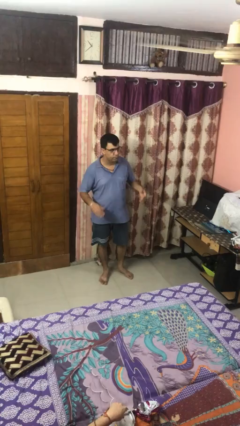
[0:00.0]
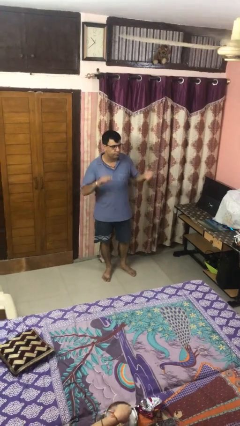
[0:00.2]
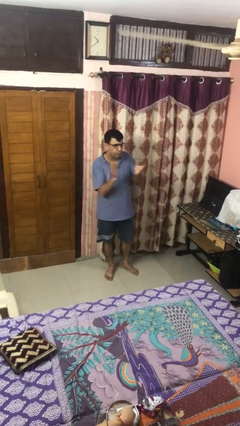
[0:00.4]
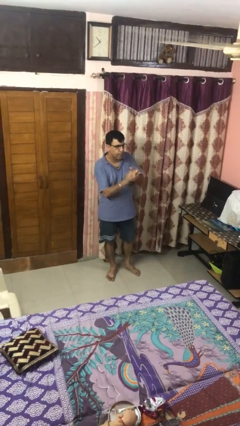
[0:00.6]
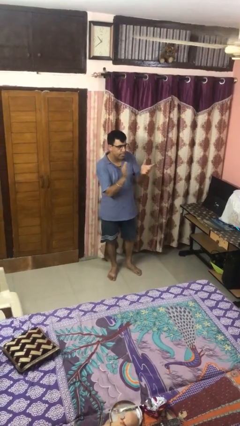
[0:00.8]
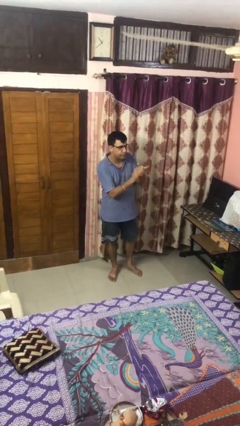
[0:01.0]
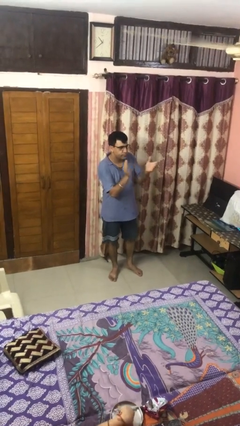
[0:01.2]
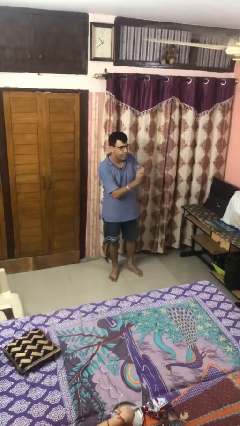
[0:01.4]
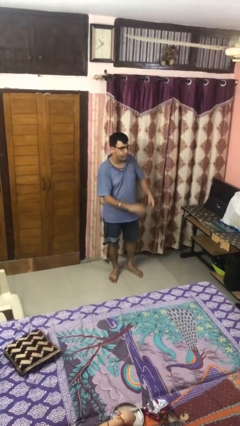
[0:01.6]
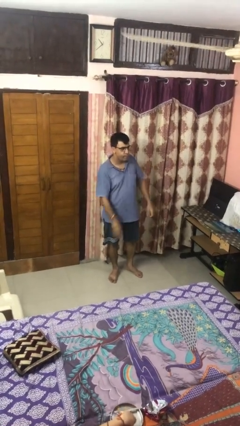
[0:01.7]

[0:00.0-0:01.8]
person claps hands

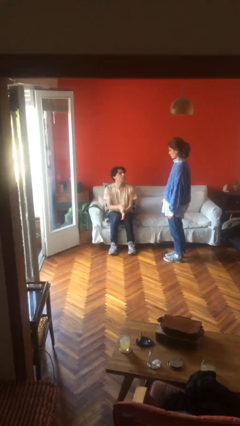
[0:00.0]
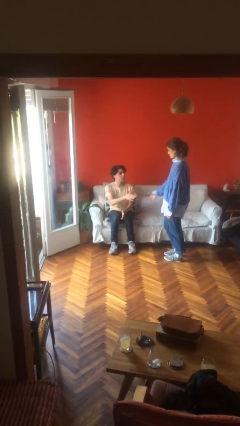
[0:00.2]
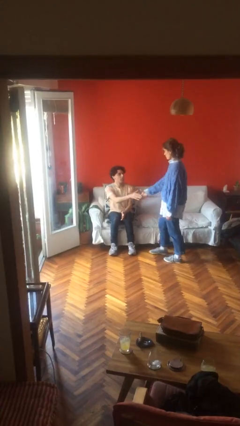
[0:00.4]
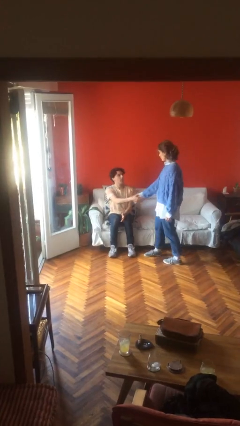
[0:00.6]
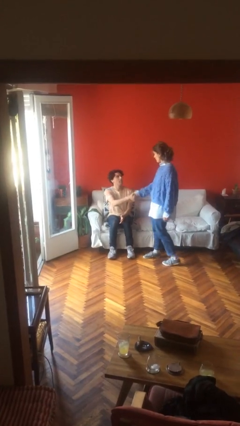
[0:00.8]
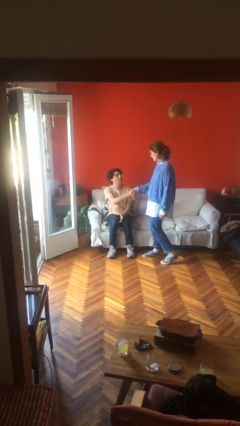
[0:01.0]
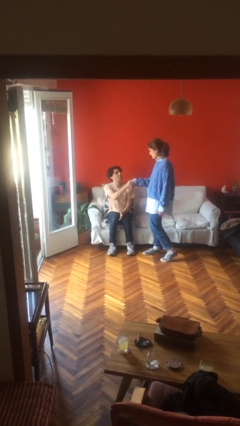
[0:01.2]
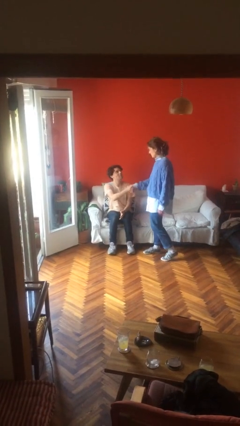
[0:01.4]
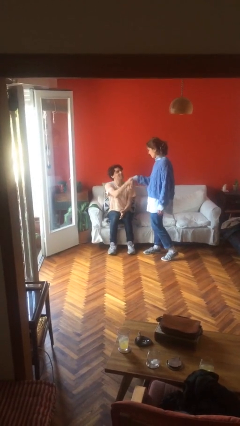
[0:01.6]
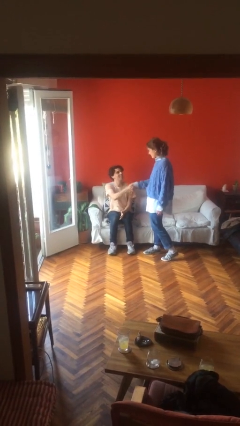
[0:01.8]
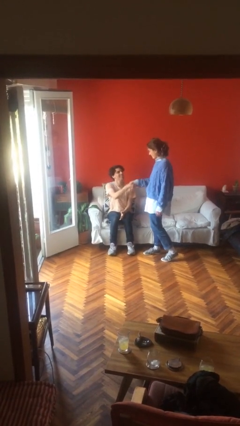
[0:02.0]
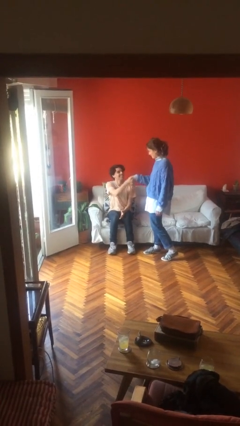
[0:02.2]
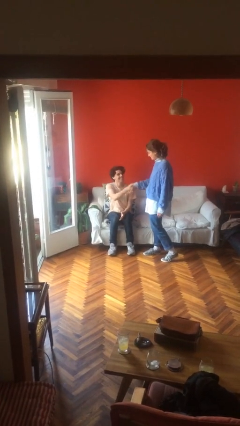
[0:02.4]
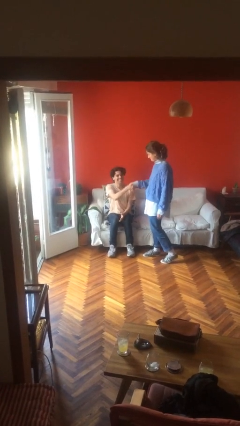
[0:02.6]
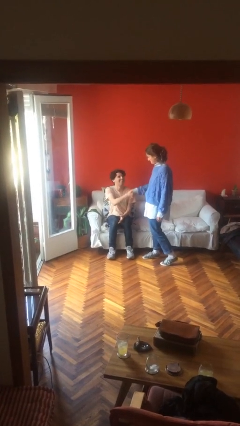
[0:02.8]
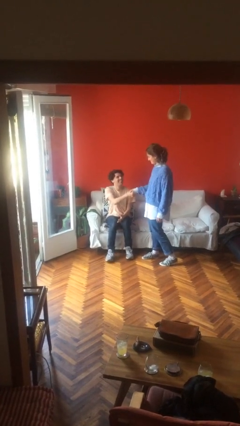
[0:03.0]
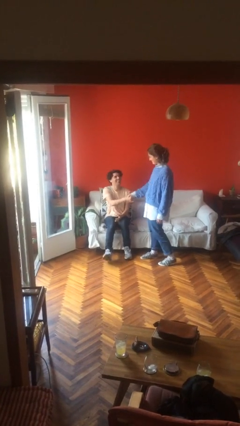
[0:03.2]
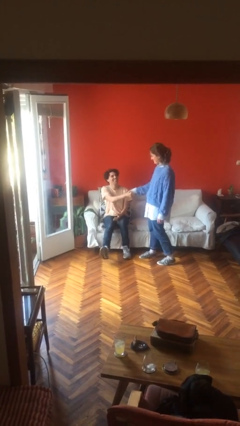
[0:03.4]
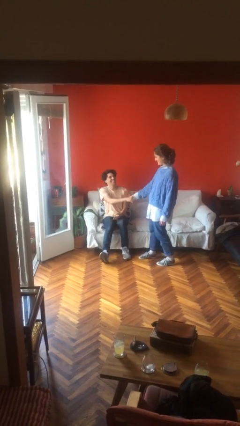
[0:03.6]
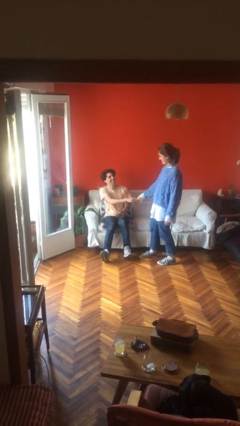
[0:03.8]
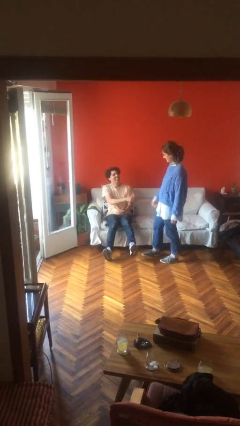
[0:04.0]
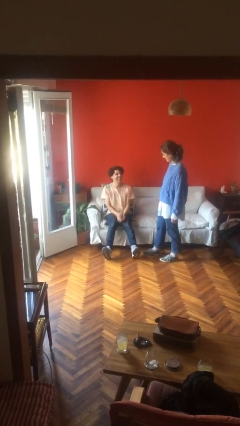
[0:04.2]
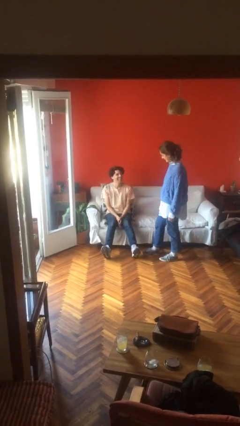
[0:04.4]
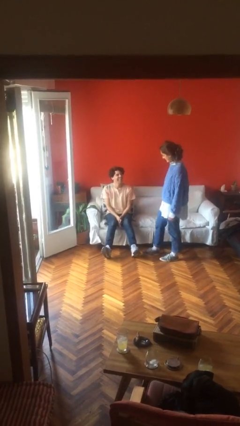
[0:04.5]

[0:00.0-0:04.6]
person shakes hand

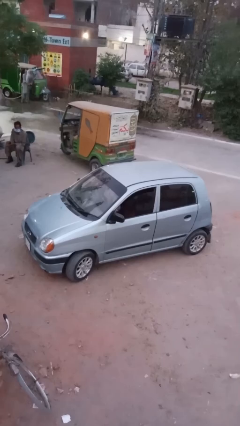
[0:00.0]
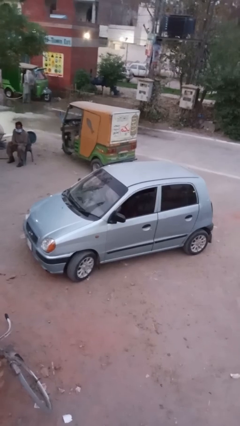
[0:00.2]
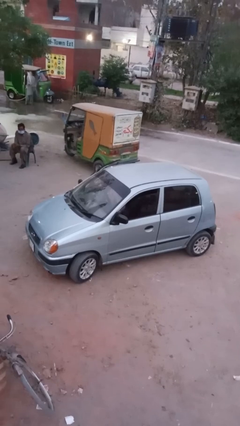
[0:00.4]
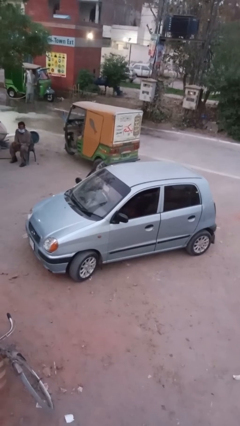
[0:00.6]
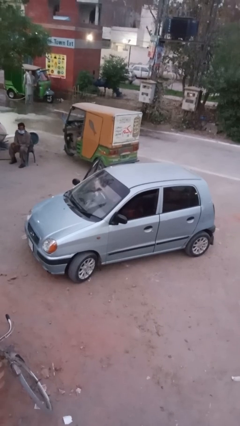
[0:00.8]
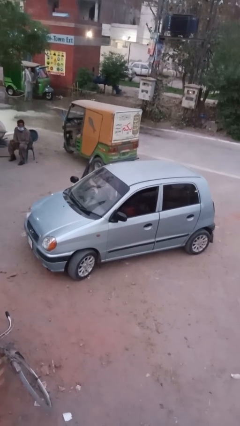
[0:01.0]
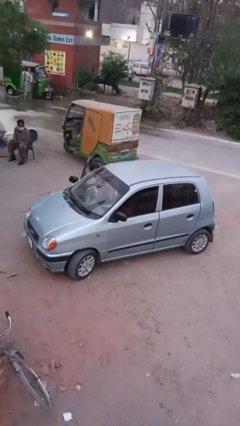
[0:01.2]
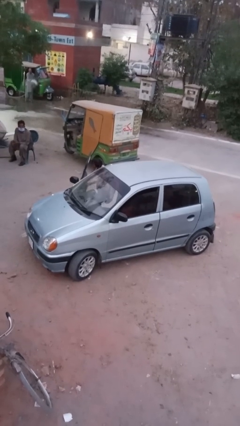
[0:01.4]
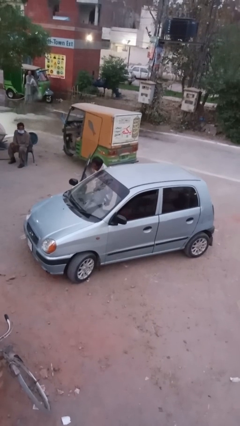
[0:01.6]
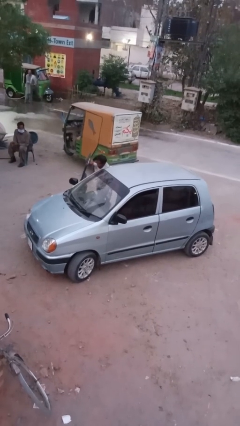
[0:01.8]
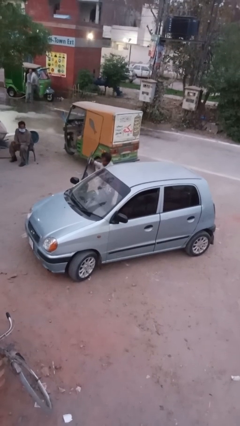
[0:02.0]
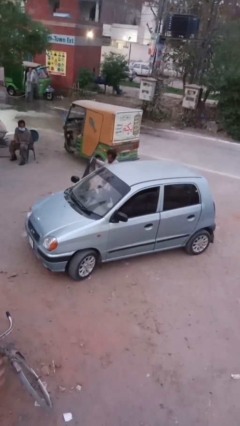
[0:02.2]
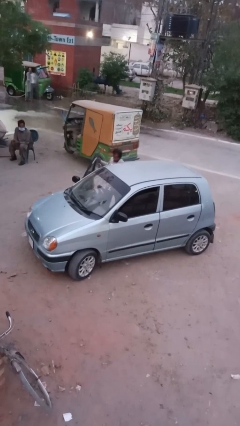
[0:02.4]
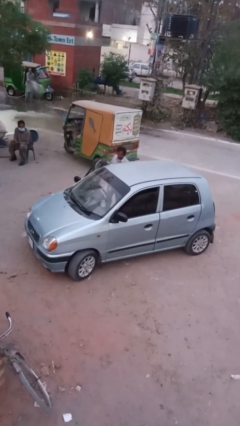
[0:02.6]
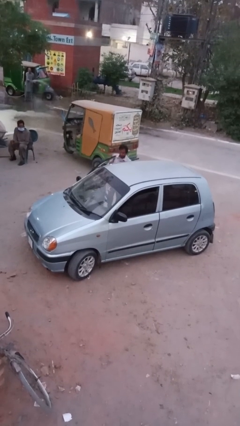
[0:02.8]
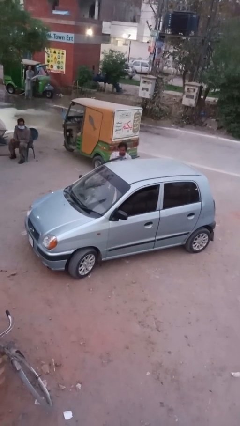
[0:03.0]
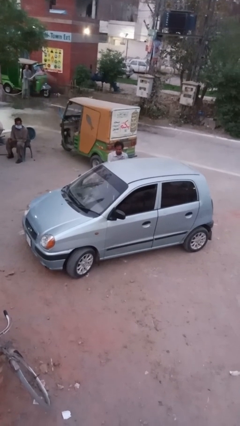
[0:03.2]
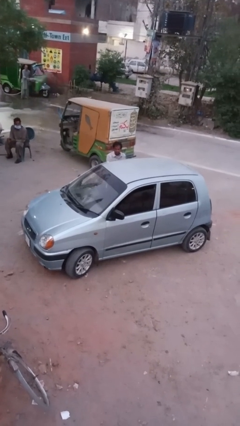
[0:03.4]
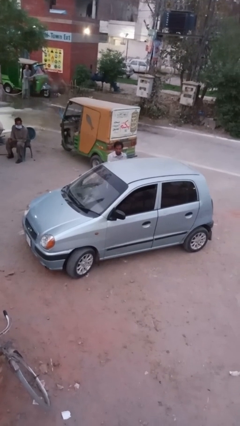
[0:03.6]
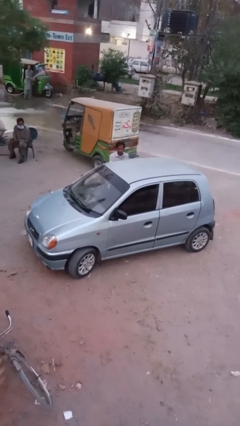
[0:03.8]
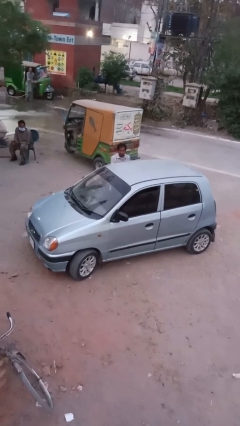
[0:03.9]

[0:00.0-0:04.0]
person closes facility door

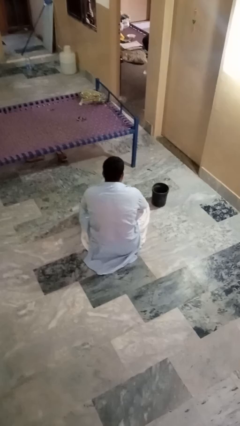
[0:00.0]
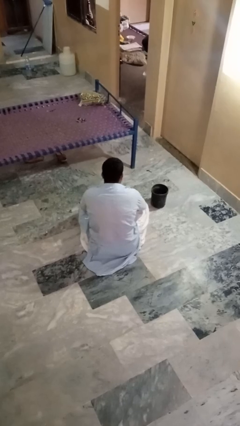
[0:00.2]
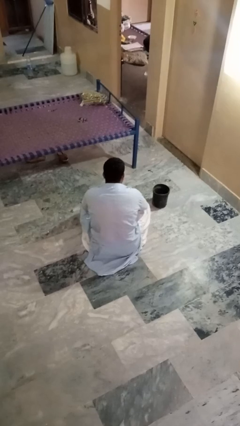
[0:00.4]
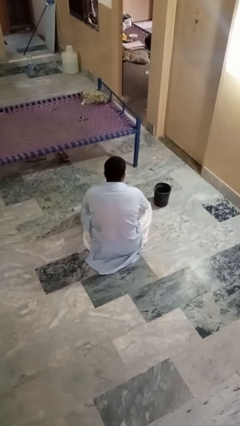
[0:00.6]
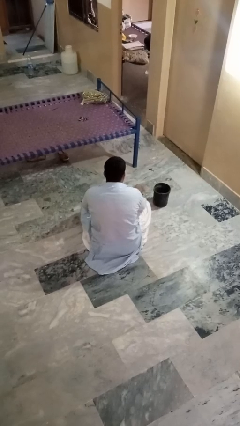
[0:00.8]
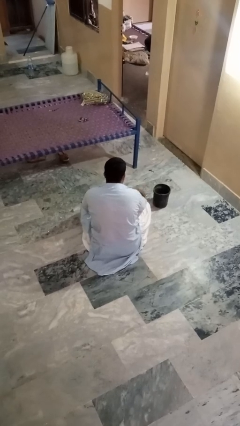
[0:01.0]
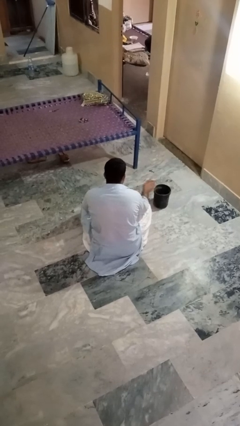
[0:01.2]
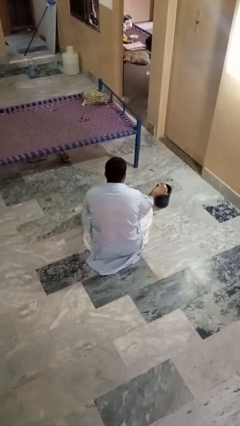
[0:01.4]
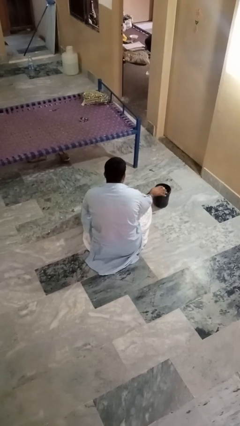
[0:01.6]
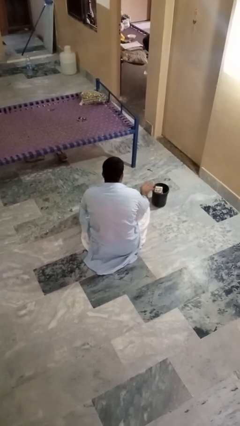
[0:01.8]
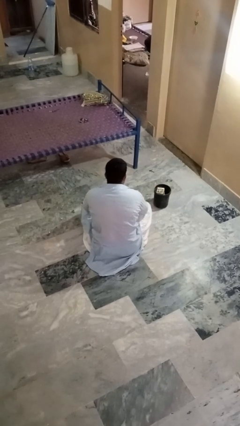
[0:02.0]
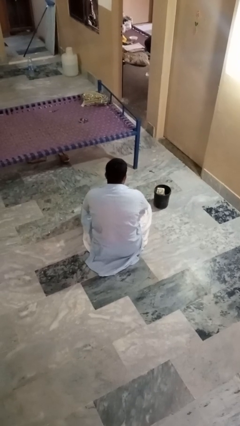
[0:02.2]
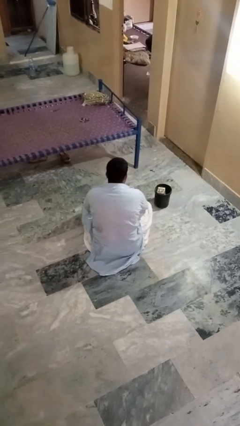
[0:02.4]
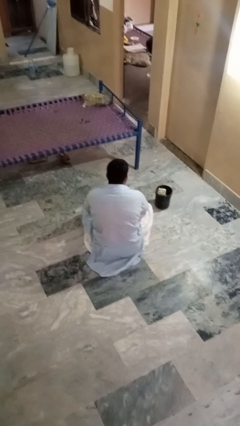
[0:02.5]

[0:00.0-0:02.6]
person puts object into basket

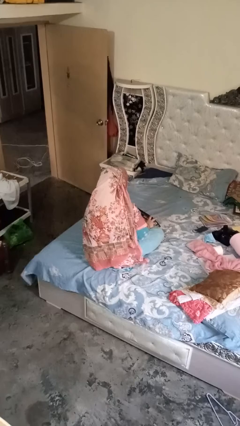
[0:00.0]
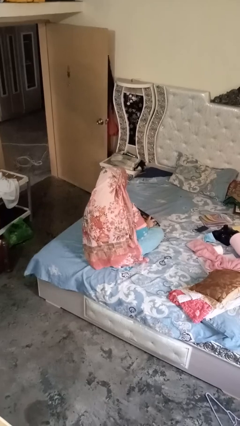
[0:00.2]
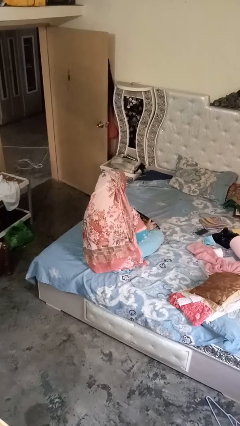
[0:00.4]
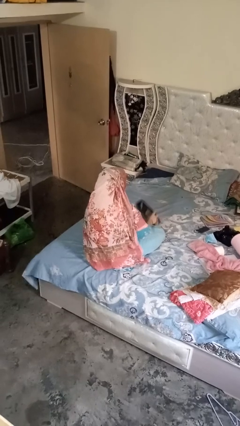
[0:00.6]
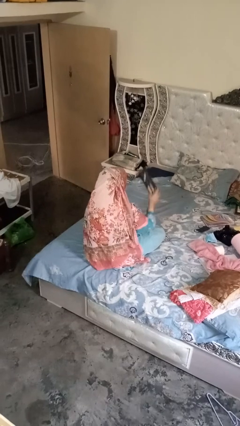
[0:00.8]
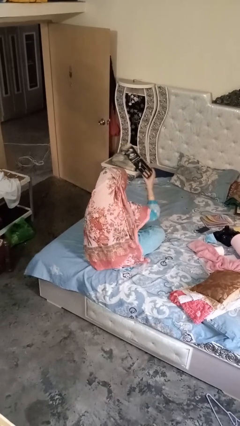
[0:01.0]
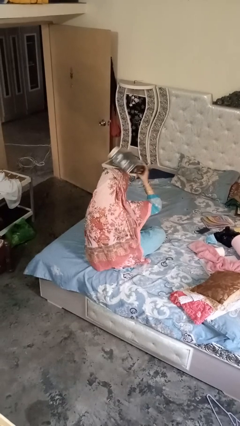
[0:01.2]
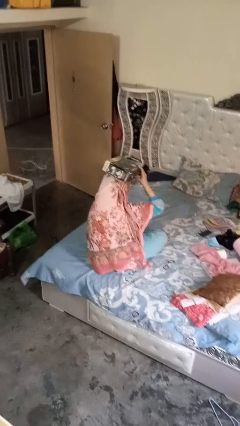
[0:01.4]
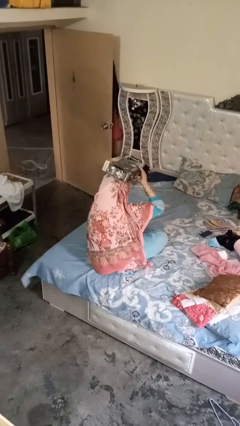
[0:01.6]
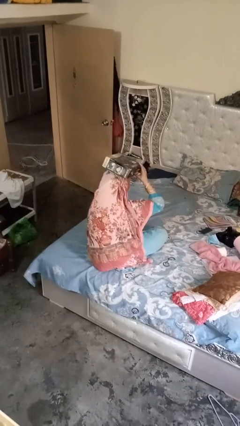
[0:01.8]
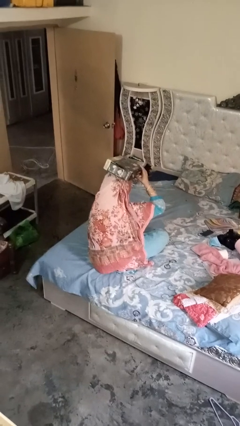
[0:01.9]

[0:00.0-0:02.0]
person holds object above head

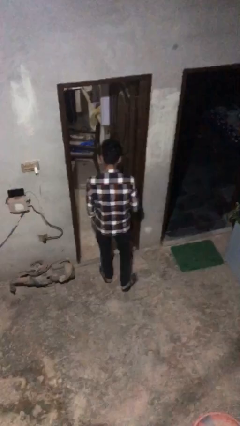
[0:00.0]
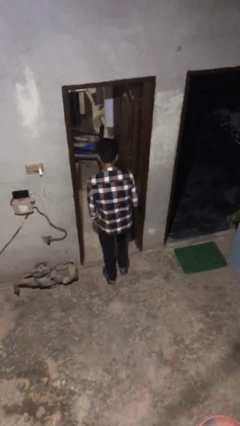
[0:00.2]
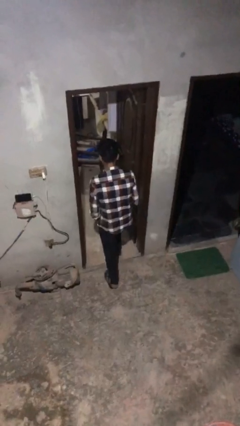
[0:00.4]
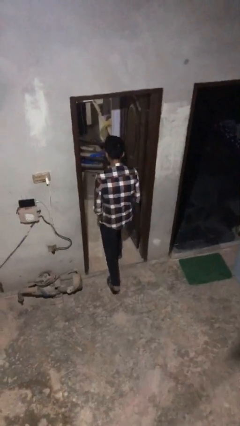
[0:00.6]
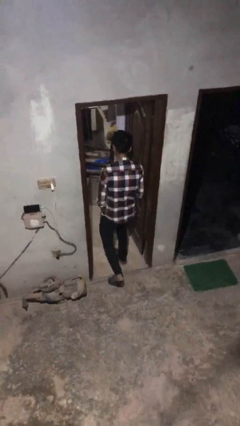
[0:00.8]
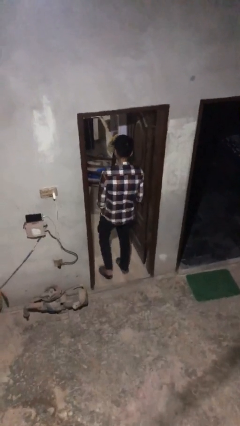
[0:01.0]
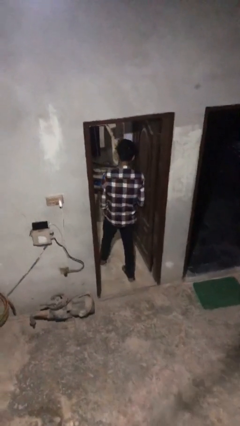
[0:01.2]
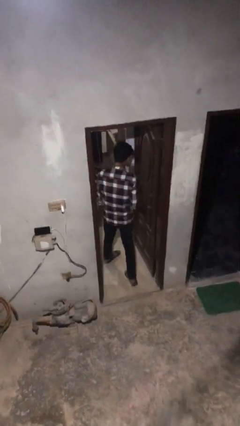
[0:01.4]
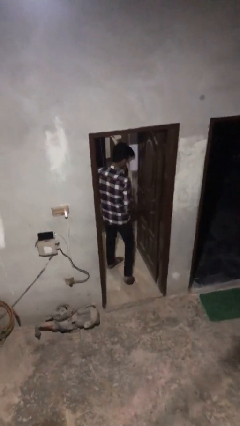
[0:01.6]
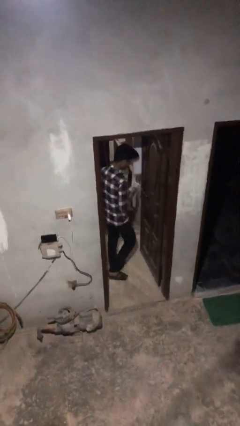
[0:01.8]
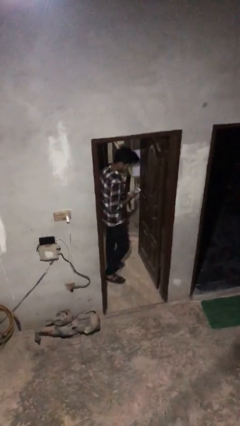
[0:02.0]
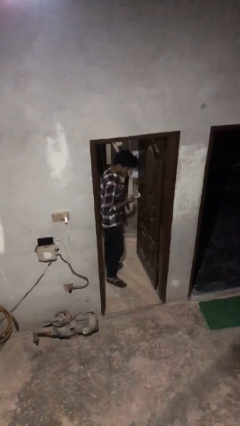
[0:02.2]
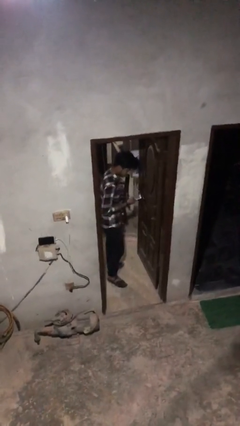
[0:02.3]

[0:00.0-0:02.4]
person exits scene through structure
